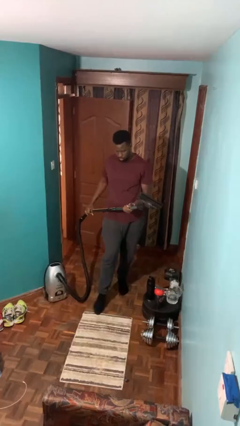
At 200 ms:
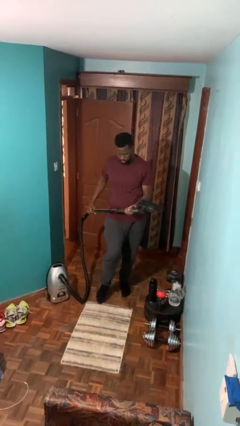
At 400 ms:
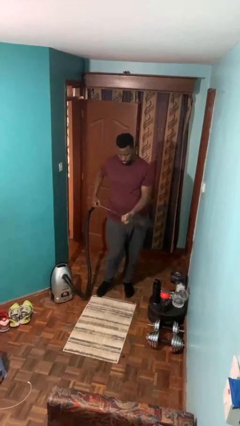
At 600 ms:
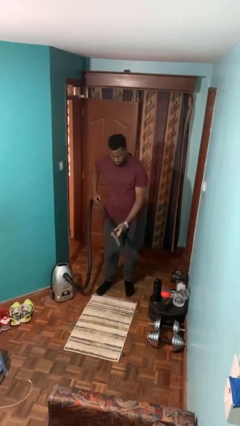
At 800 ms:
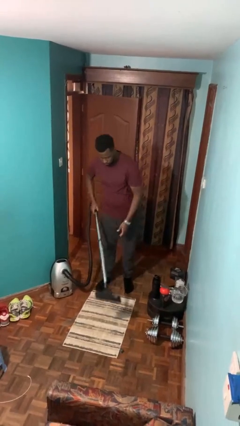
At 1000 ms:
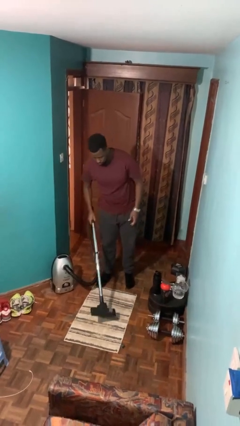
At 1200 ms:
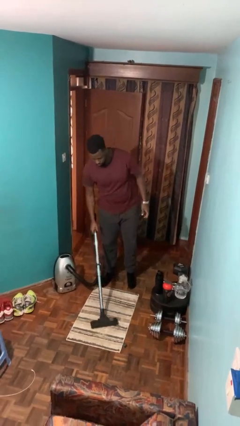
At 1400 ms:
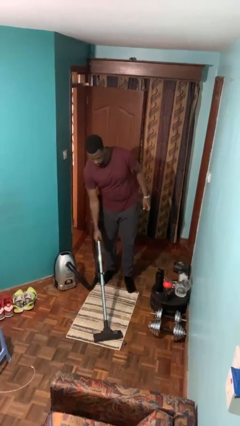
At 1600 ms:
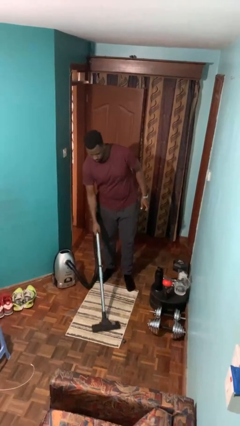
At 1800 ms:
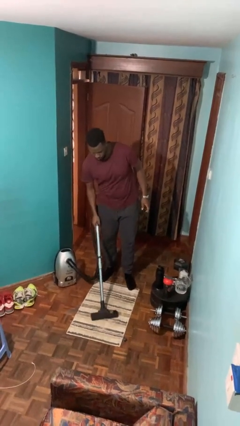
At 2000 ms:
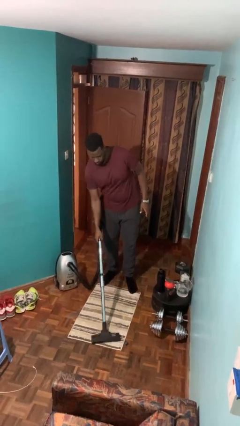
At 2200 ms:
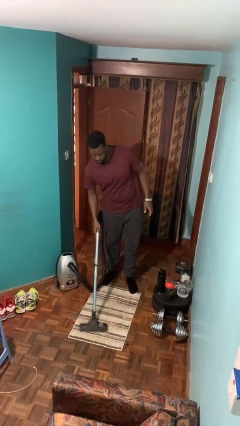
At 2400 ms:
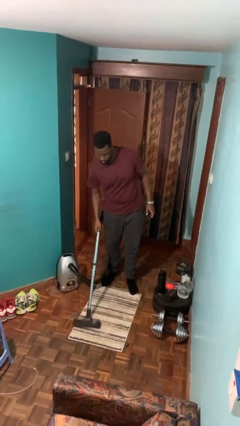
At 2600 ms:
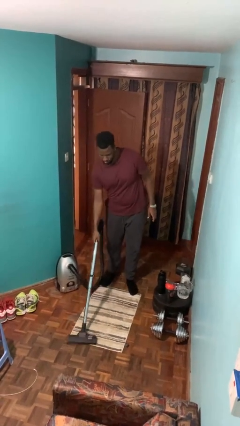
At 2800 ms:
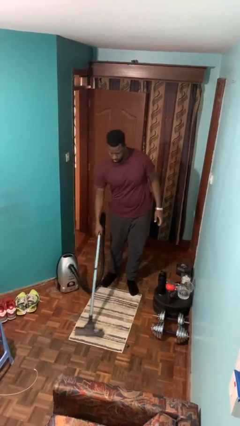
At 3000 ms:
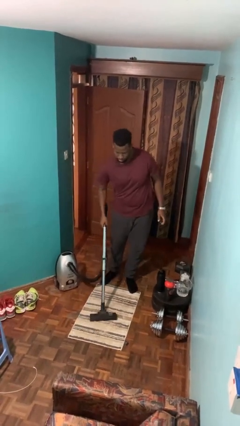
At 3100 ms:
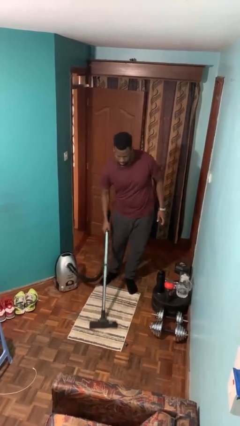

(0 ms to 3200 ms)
person vacuums carpet

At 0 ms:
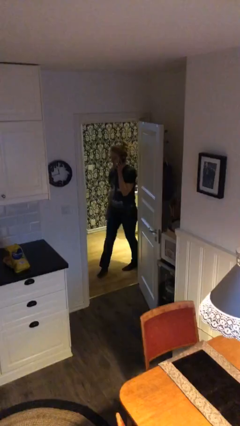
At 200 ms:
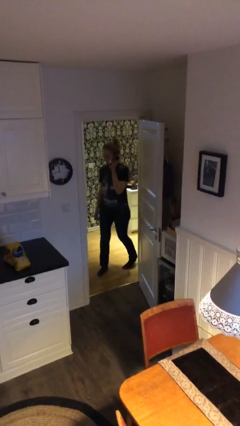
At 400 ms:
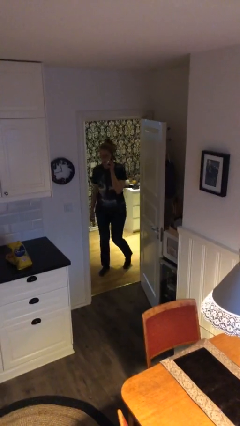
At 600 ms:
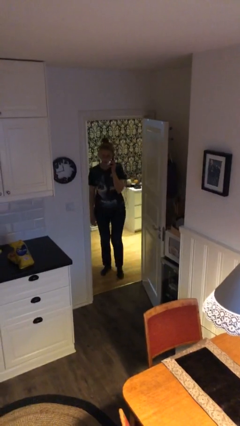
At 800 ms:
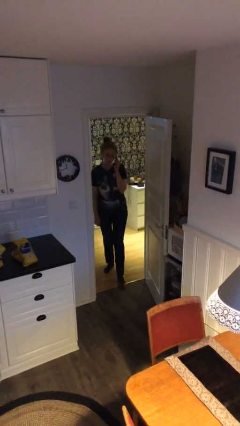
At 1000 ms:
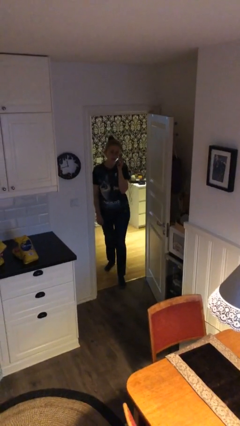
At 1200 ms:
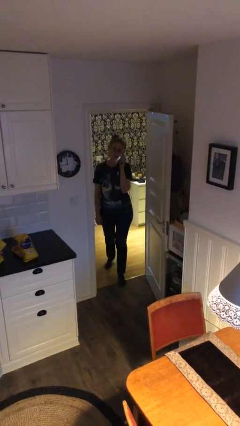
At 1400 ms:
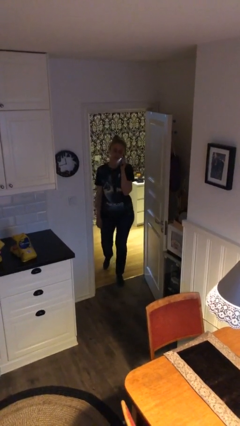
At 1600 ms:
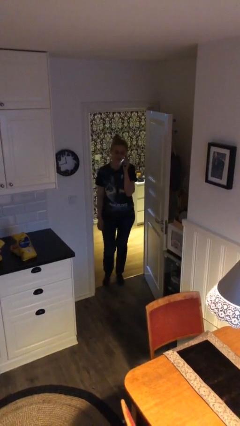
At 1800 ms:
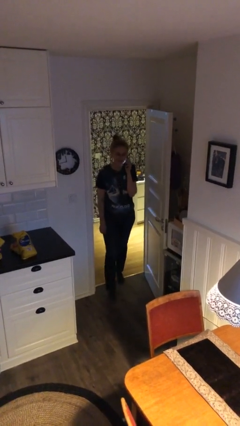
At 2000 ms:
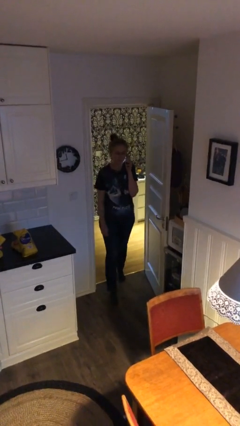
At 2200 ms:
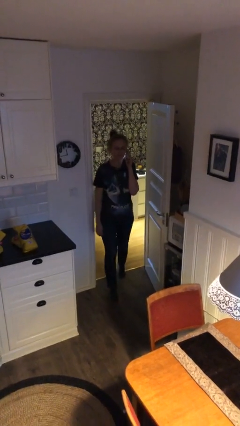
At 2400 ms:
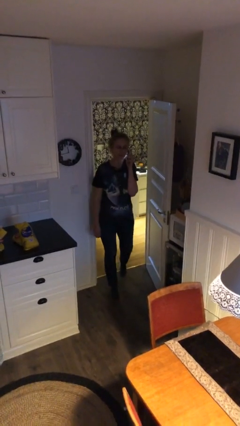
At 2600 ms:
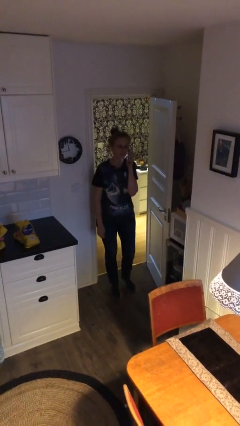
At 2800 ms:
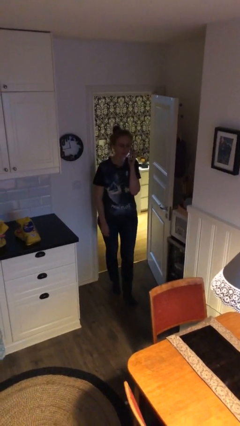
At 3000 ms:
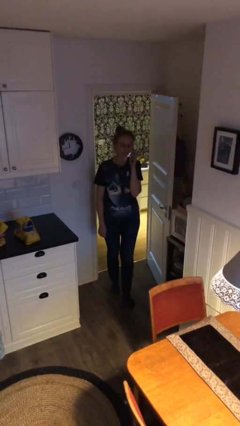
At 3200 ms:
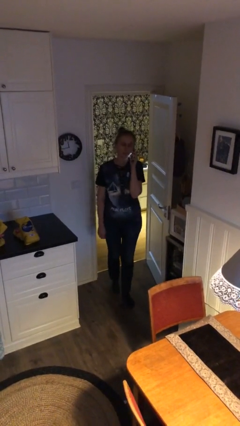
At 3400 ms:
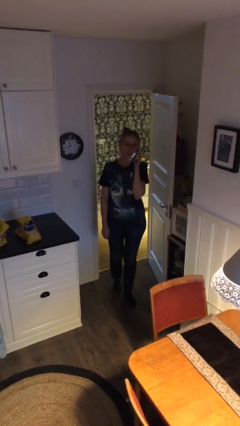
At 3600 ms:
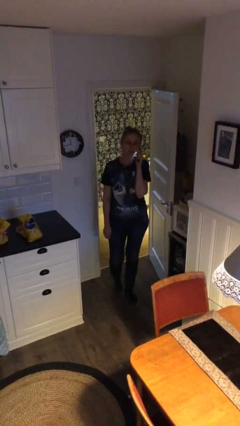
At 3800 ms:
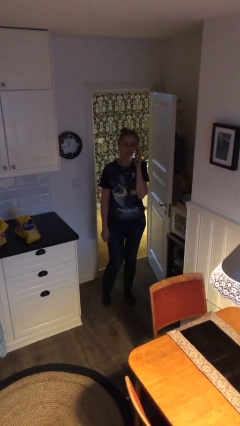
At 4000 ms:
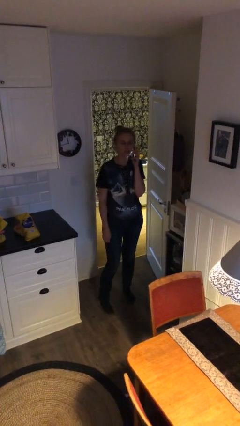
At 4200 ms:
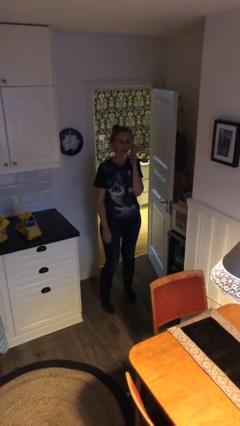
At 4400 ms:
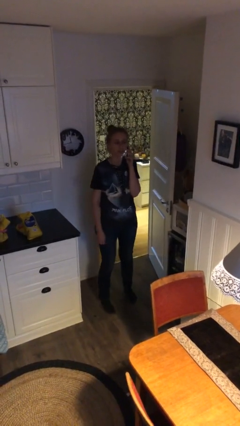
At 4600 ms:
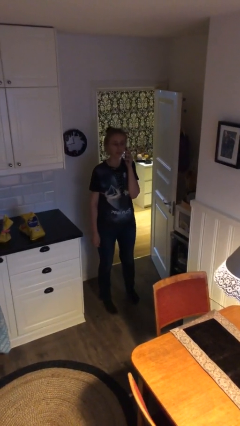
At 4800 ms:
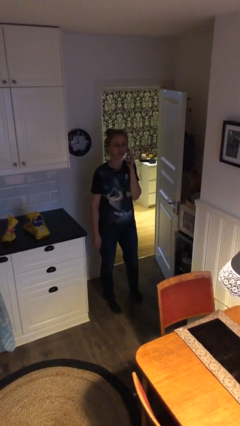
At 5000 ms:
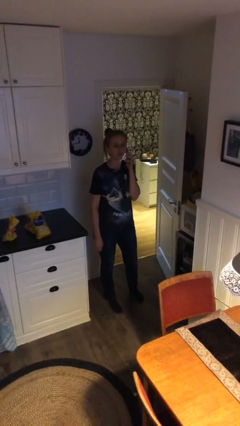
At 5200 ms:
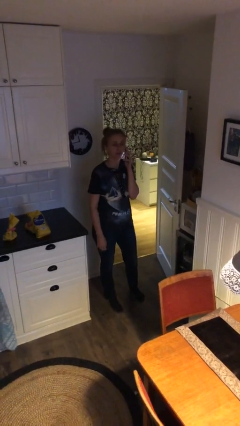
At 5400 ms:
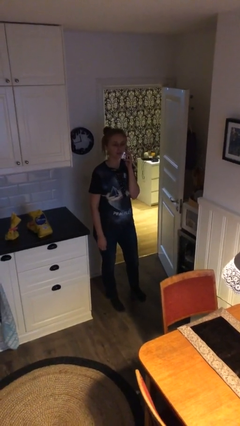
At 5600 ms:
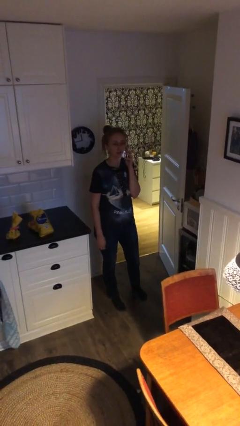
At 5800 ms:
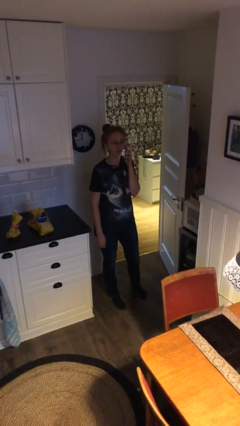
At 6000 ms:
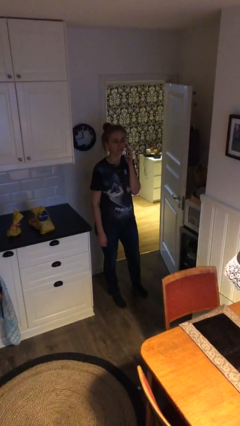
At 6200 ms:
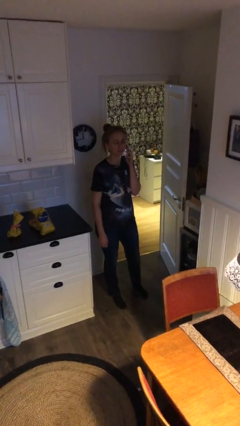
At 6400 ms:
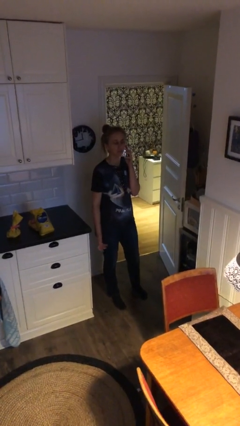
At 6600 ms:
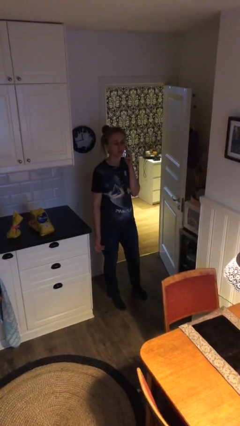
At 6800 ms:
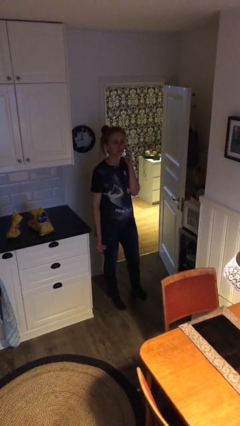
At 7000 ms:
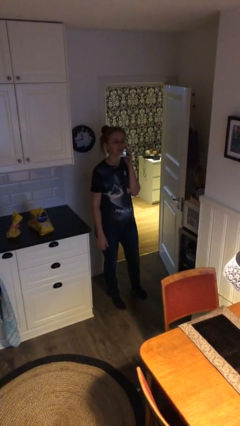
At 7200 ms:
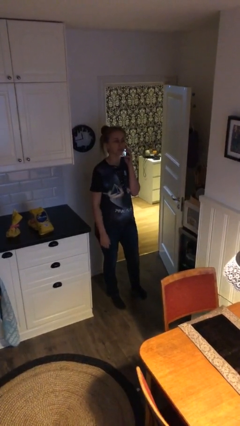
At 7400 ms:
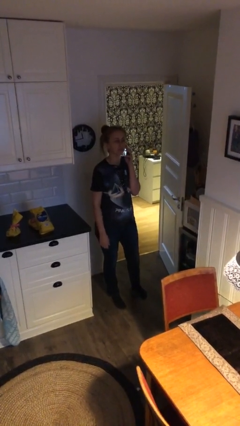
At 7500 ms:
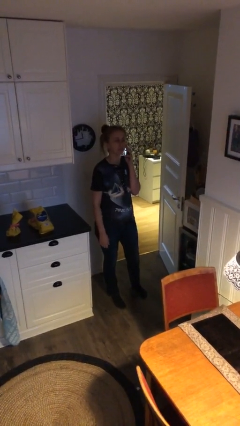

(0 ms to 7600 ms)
person enters scene through structure

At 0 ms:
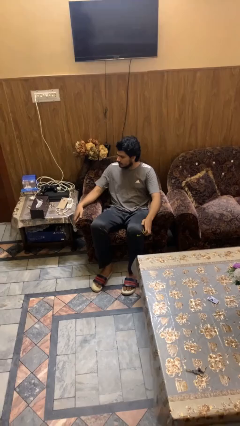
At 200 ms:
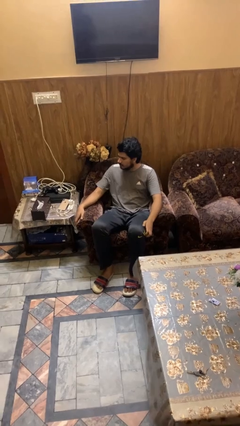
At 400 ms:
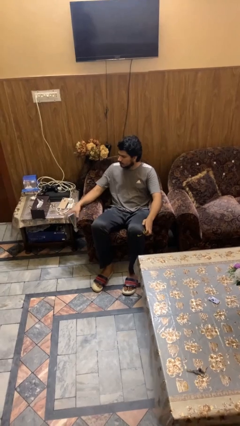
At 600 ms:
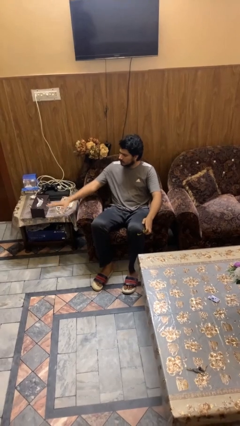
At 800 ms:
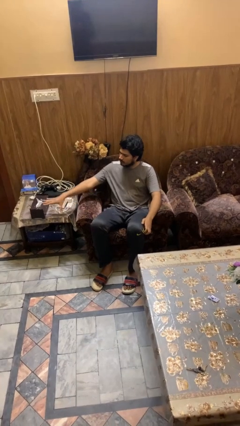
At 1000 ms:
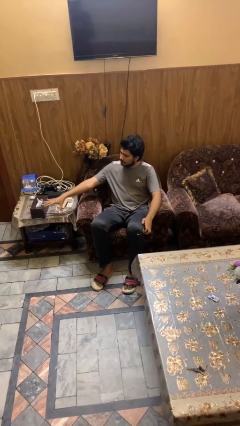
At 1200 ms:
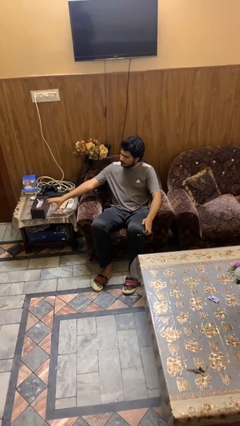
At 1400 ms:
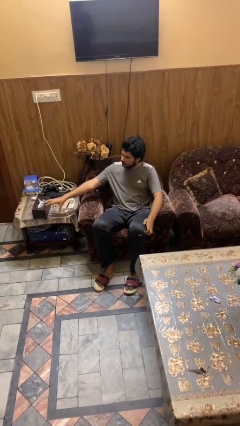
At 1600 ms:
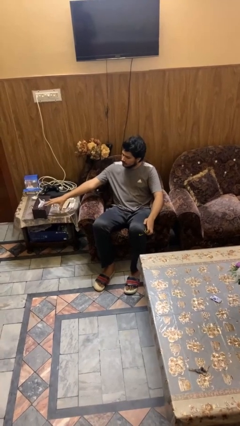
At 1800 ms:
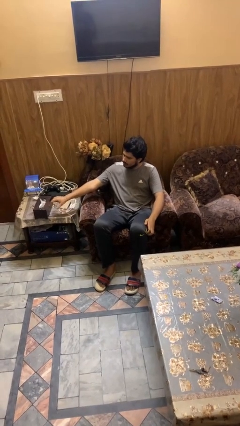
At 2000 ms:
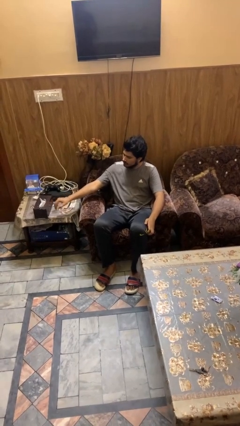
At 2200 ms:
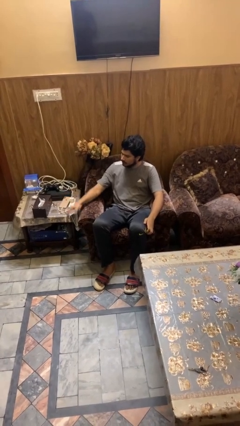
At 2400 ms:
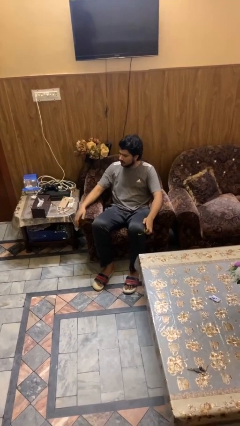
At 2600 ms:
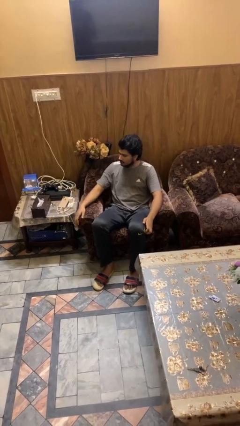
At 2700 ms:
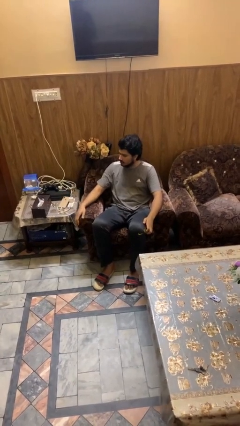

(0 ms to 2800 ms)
person waves hand over object

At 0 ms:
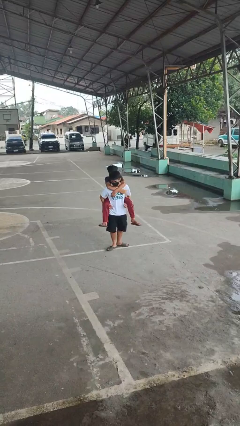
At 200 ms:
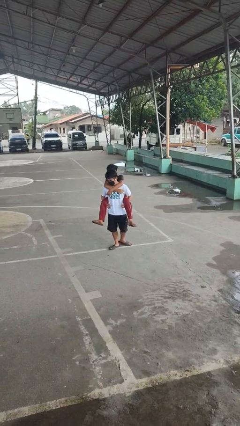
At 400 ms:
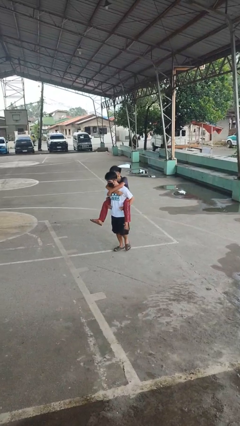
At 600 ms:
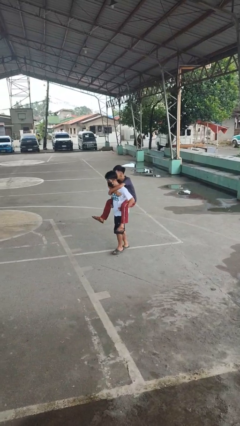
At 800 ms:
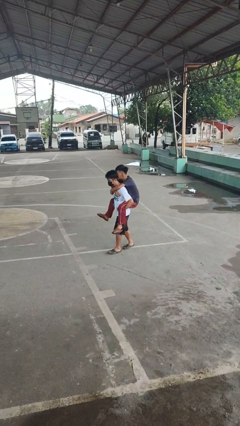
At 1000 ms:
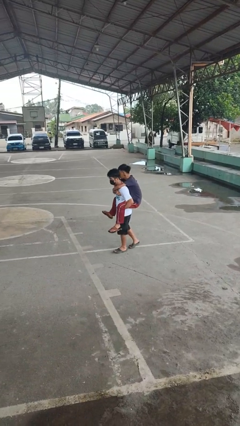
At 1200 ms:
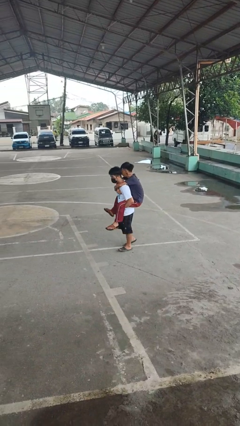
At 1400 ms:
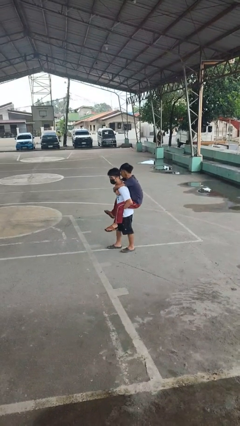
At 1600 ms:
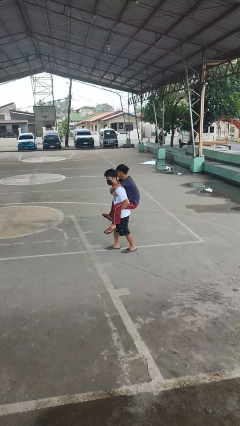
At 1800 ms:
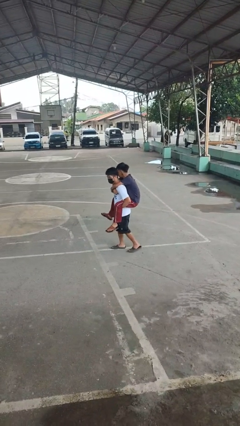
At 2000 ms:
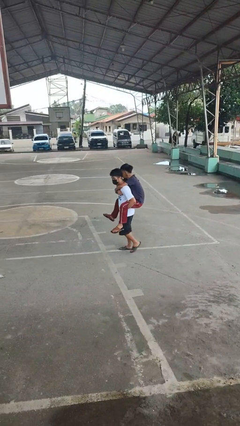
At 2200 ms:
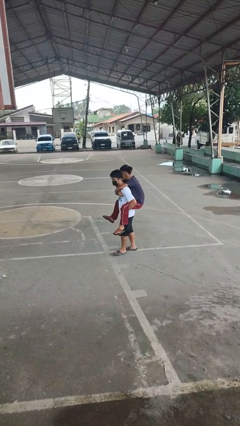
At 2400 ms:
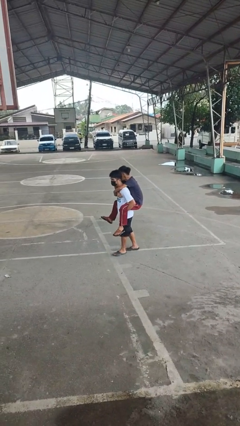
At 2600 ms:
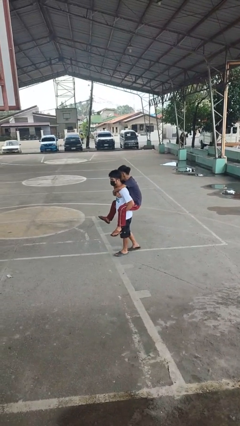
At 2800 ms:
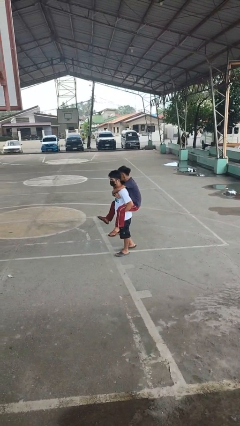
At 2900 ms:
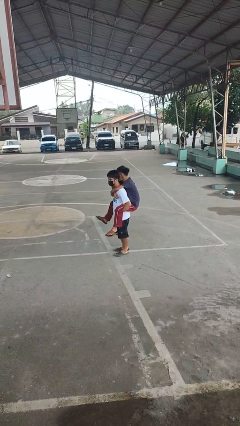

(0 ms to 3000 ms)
person carries person on back

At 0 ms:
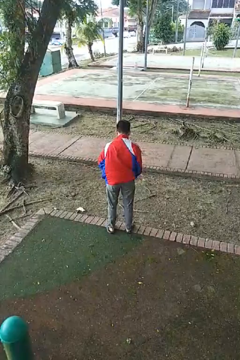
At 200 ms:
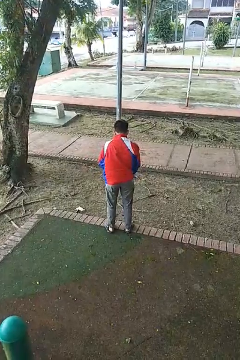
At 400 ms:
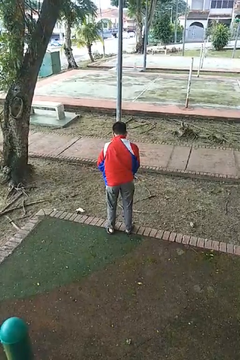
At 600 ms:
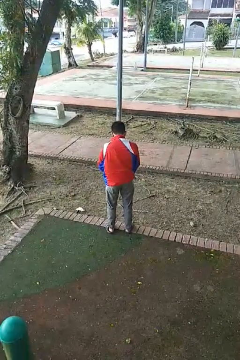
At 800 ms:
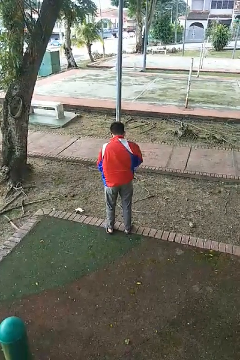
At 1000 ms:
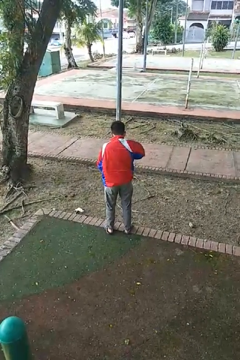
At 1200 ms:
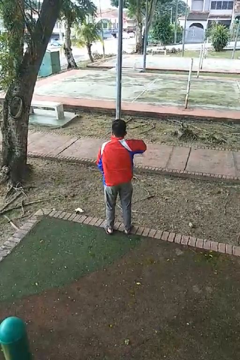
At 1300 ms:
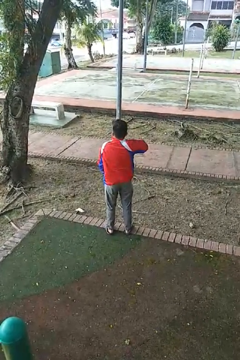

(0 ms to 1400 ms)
person zips up jacket

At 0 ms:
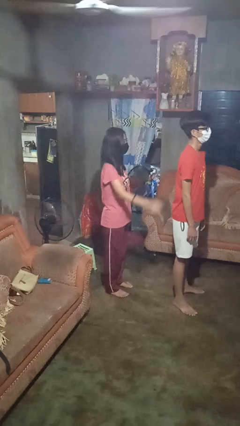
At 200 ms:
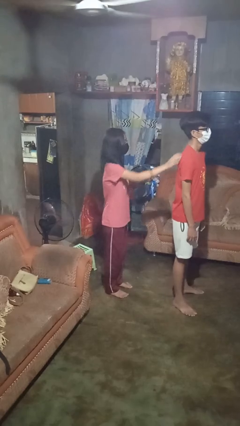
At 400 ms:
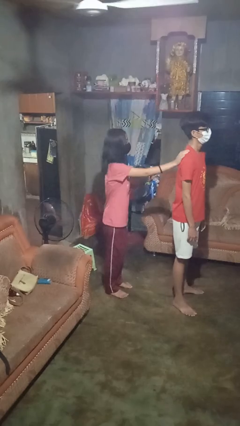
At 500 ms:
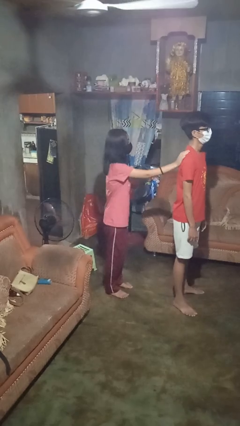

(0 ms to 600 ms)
person touches back of person
